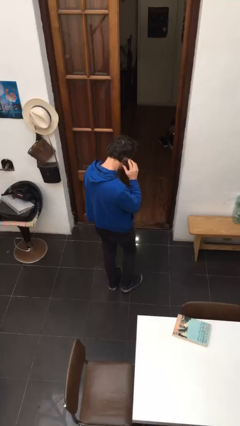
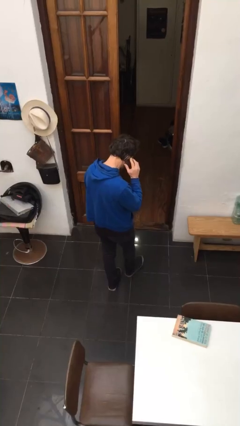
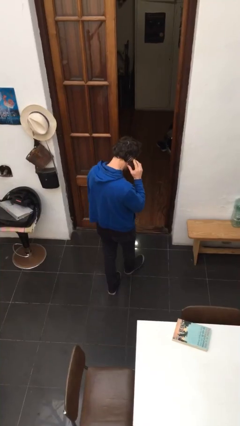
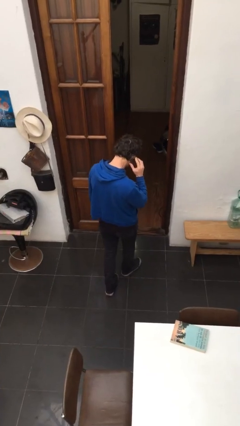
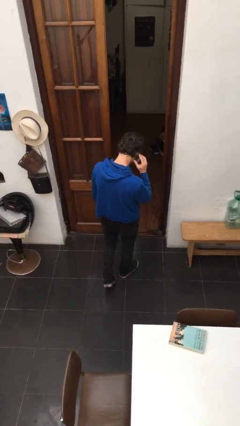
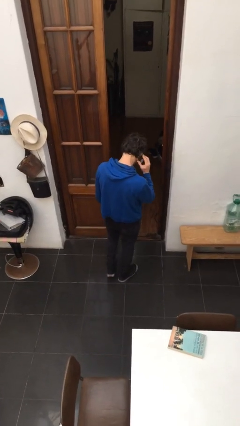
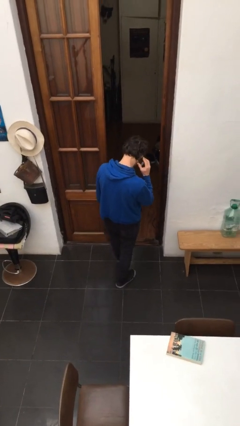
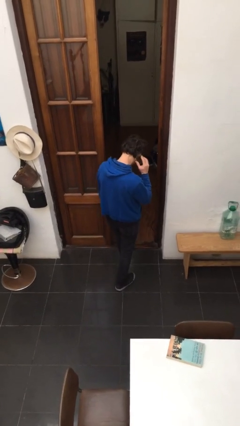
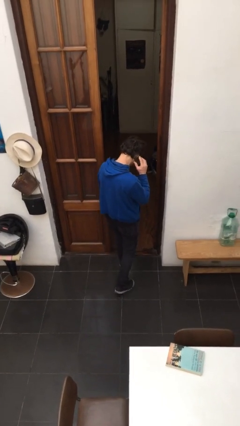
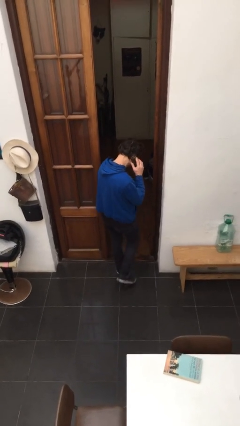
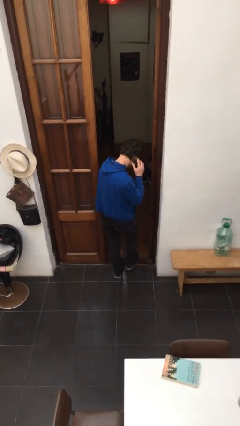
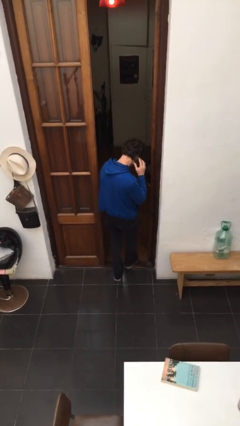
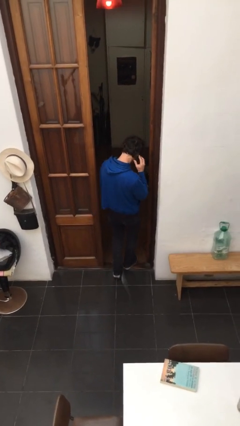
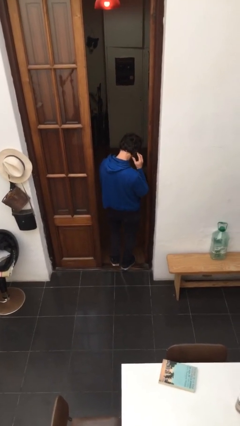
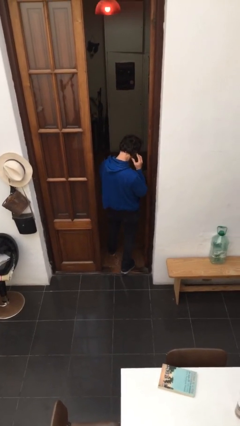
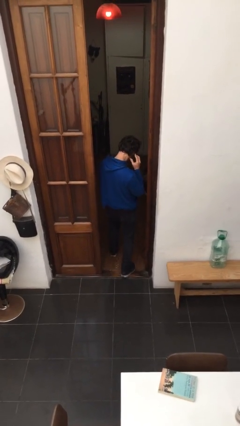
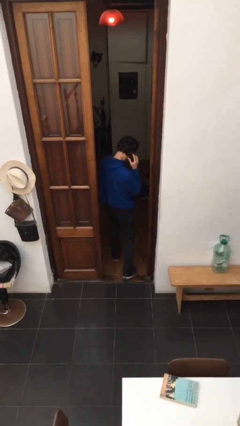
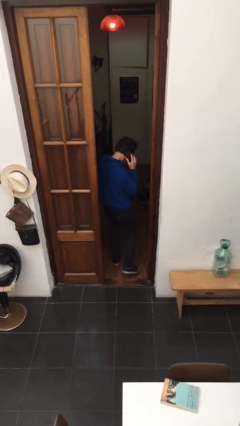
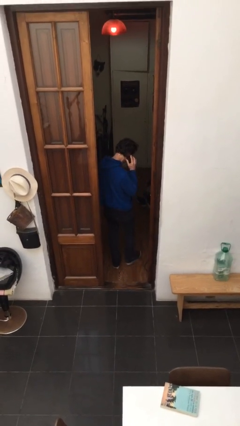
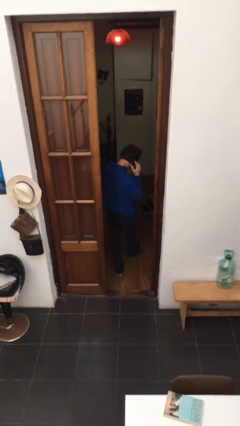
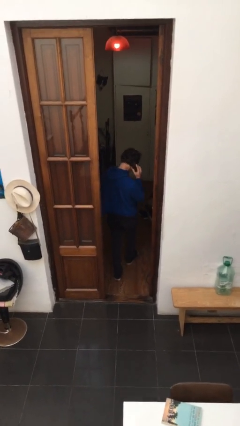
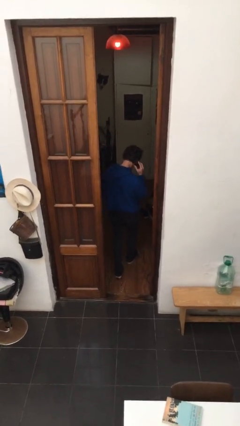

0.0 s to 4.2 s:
person exits scene through structure

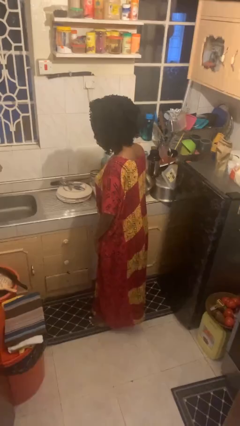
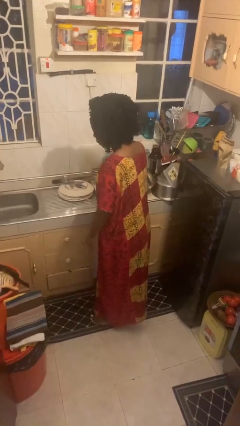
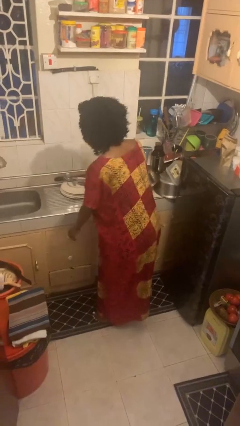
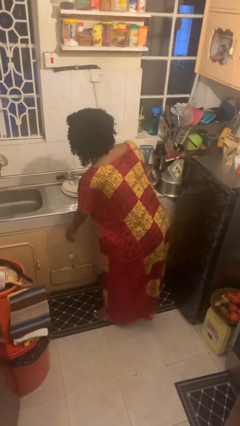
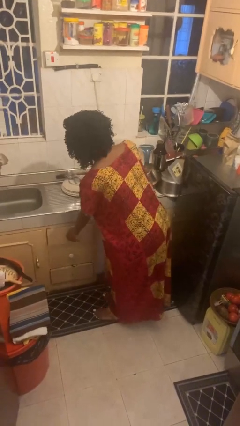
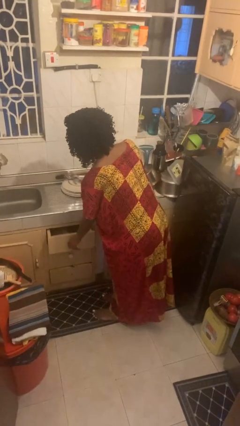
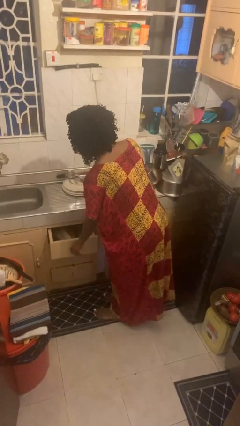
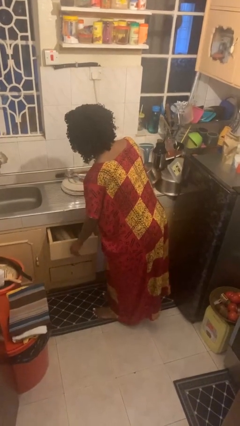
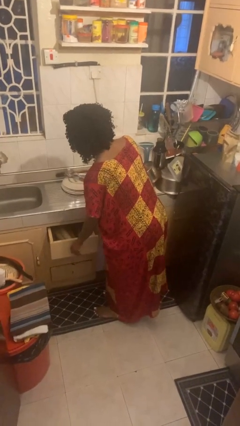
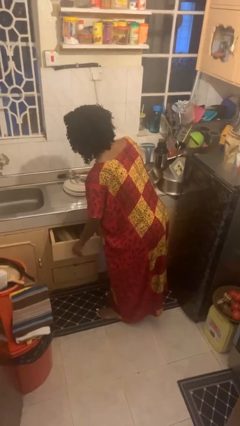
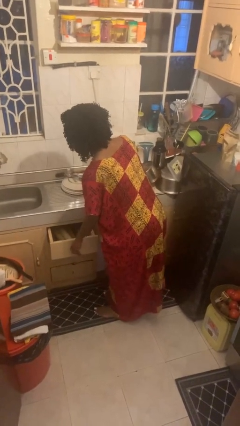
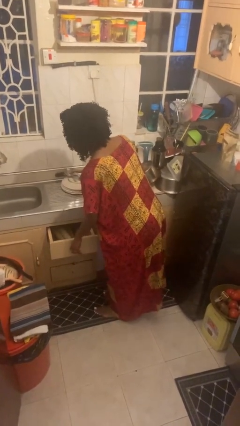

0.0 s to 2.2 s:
person opens kitchen drawer

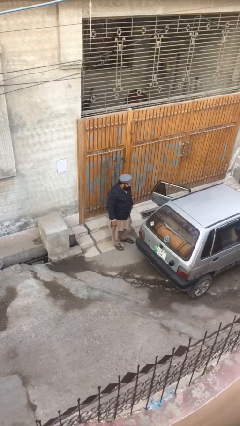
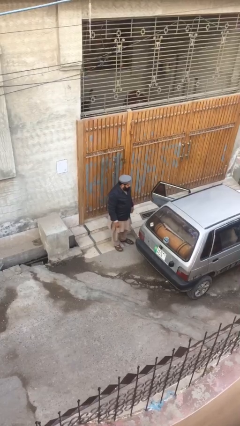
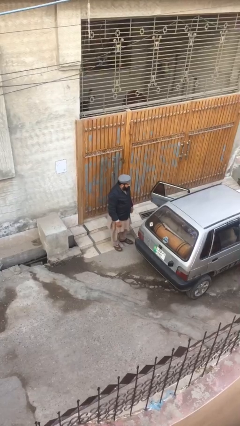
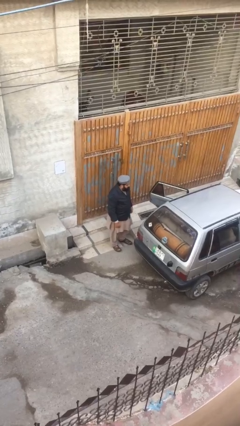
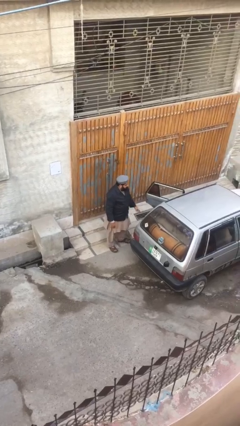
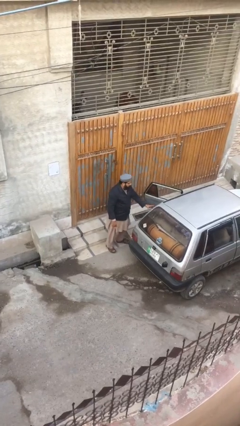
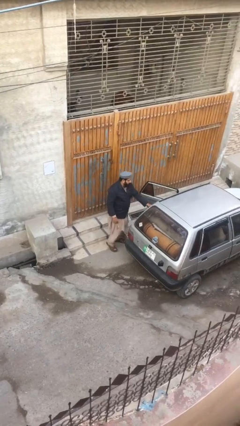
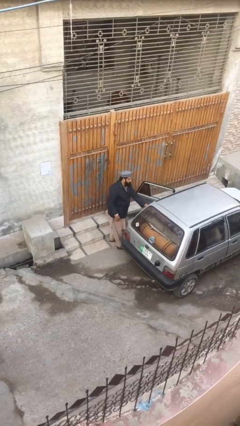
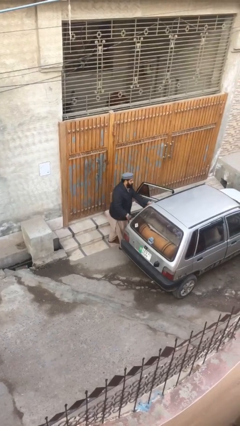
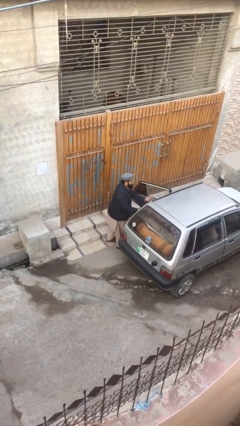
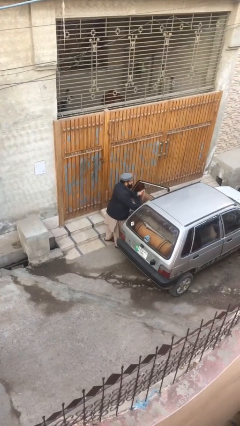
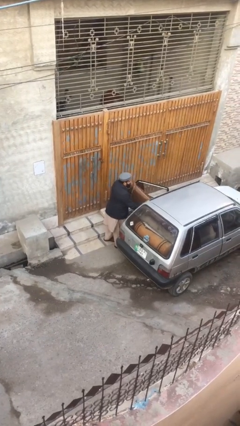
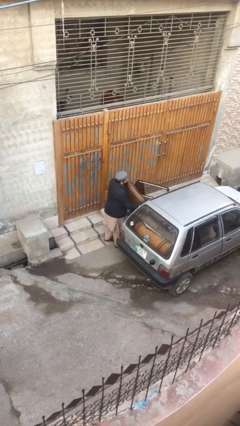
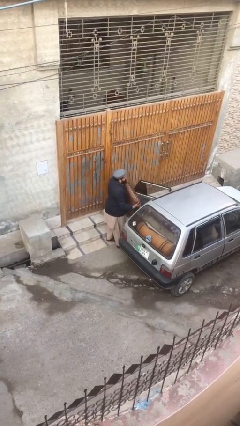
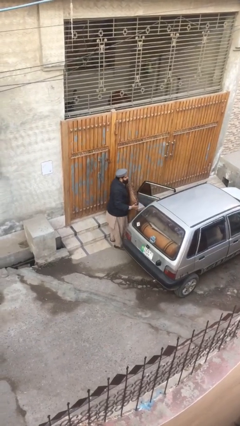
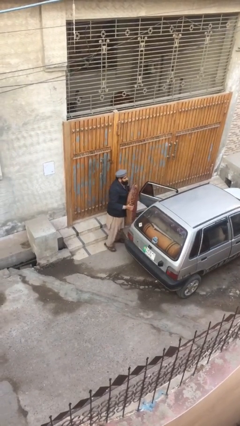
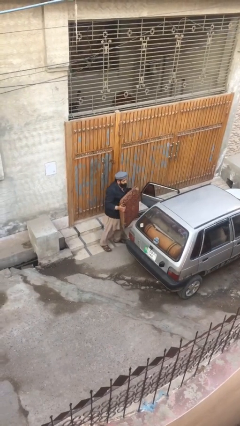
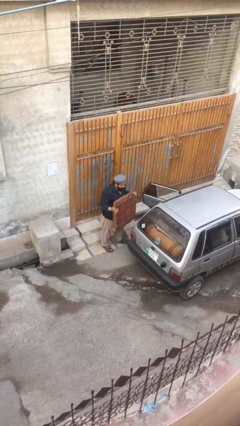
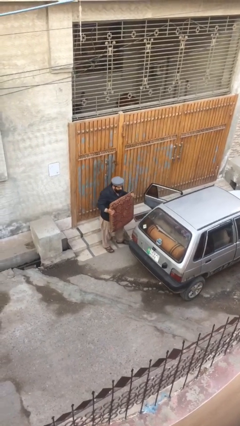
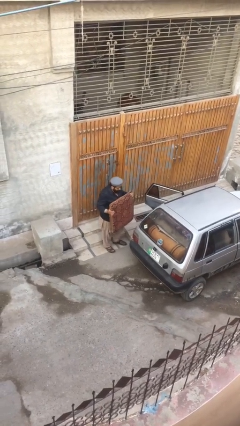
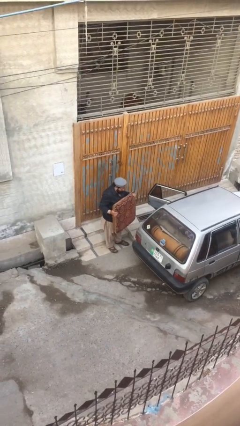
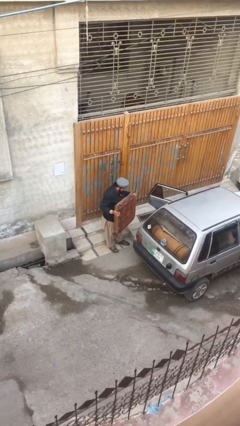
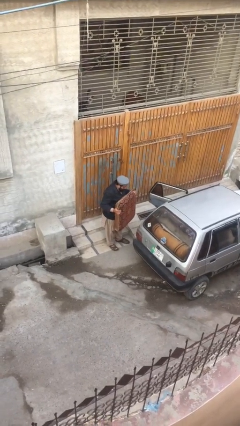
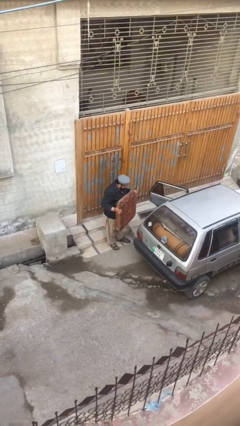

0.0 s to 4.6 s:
person unloads car

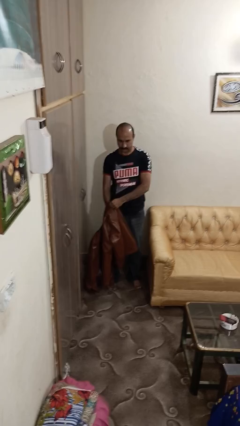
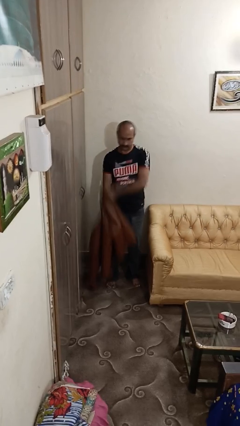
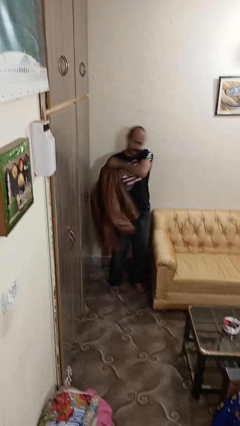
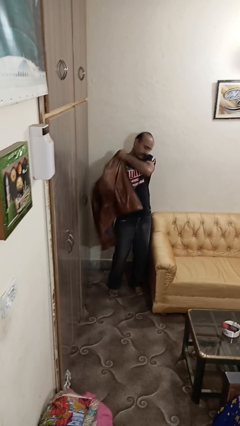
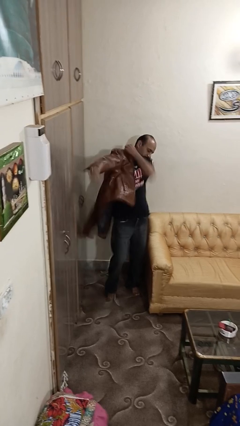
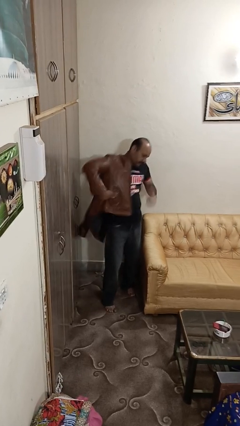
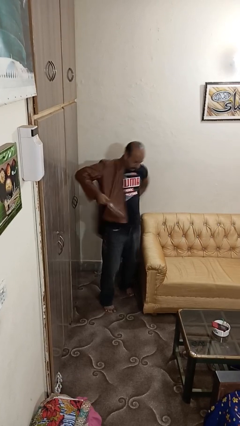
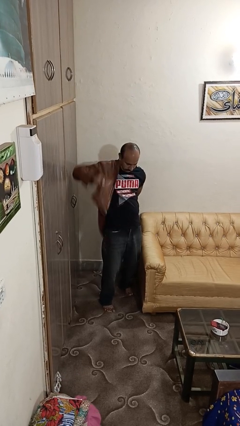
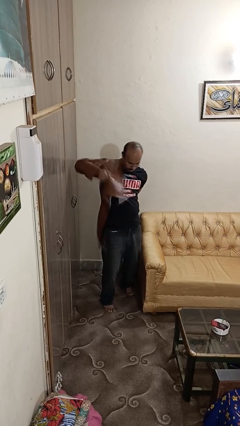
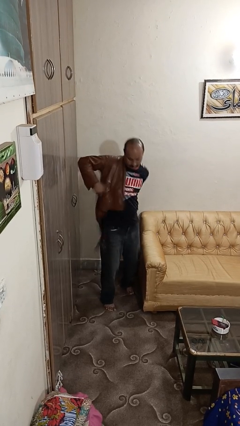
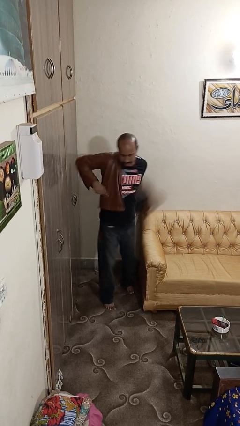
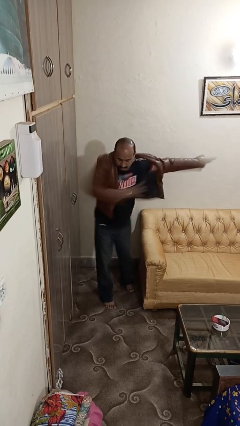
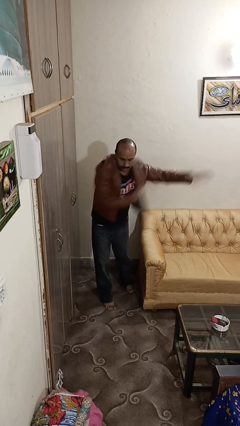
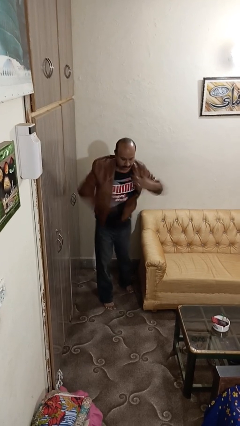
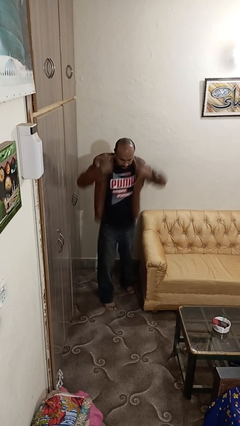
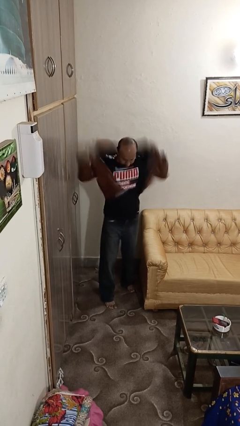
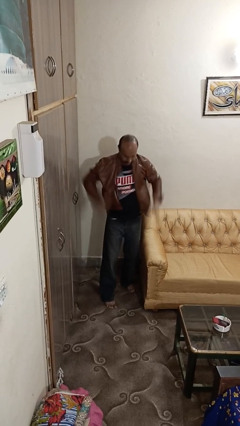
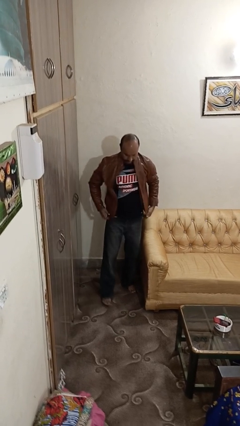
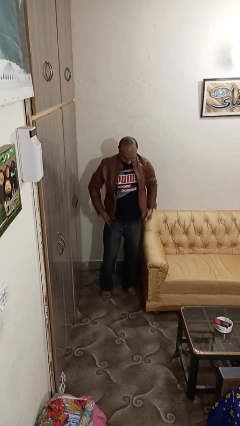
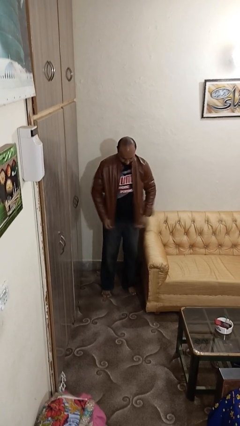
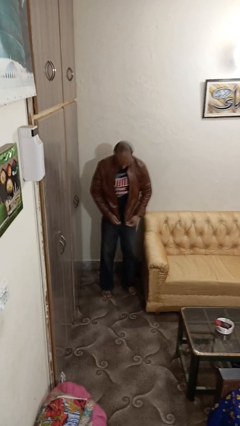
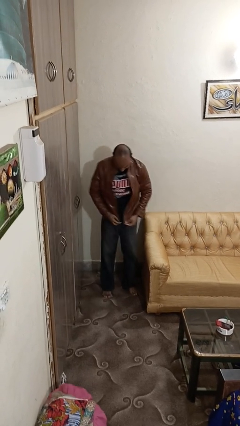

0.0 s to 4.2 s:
person puts on jacket

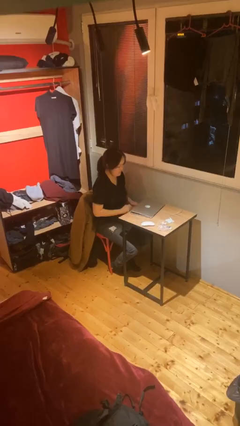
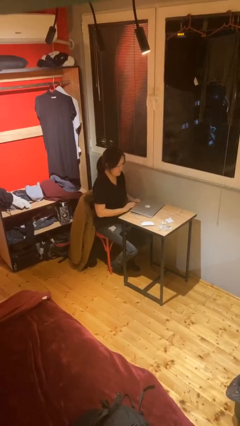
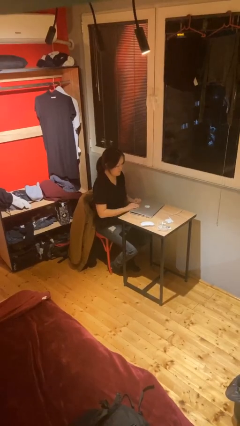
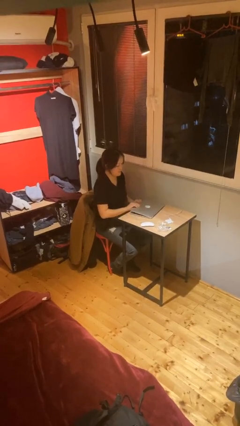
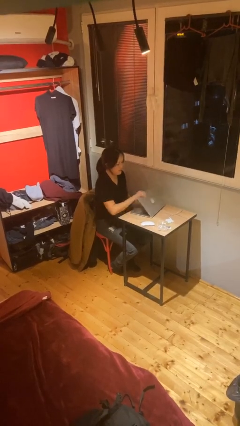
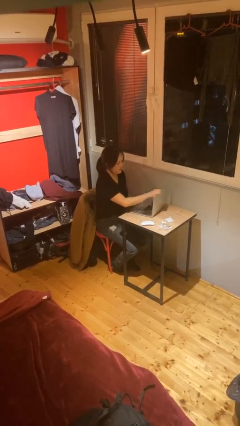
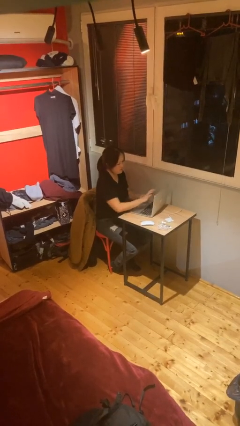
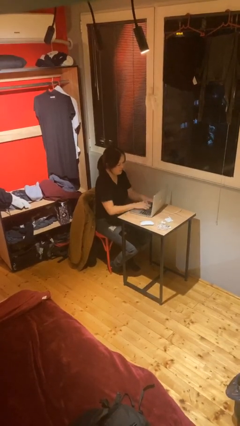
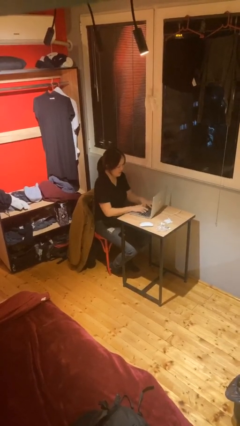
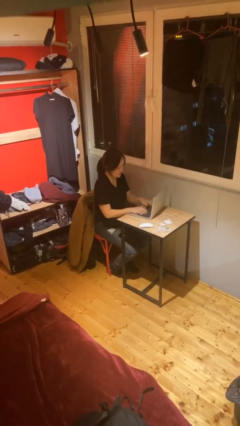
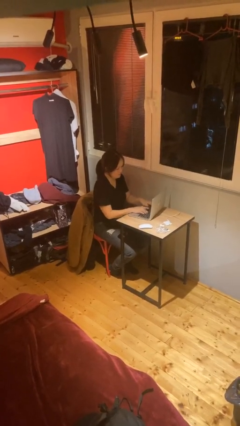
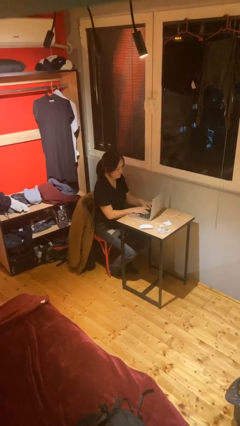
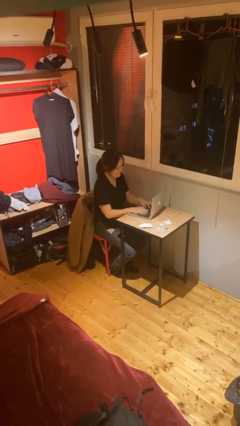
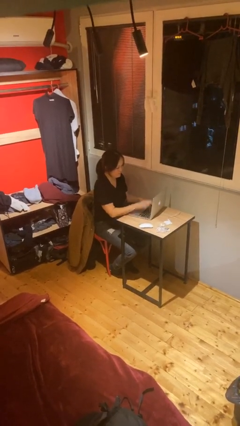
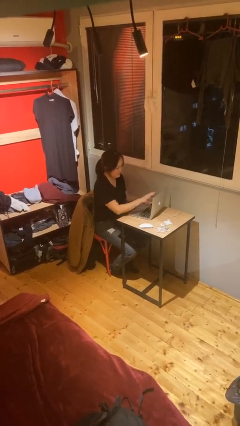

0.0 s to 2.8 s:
person interacts with laptop
